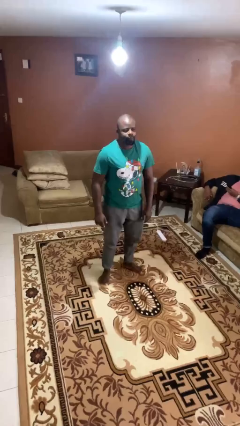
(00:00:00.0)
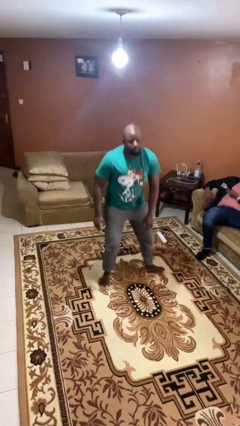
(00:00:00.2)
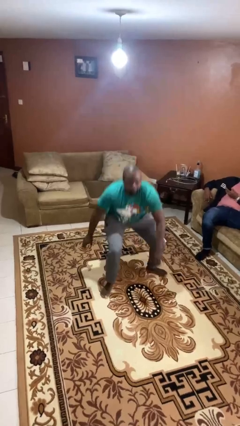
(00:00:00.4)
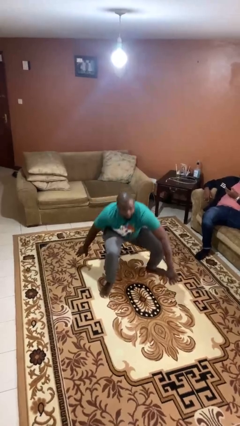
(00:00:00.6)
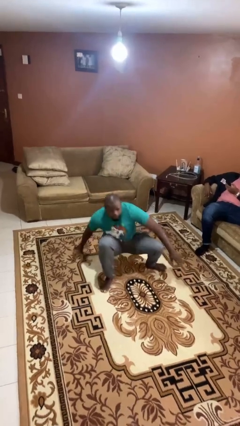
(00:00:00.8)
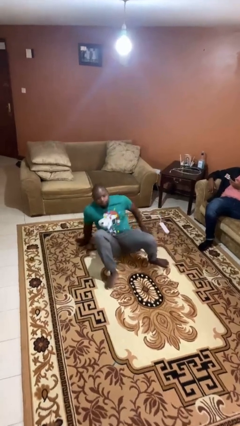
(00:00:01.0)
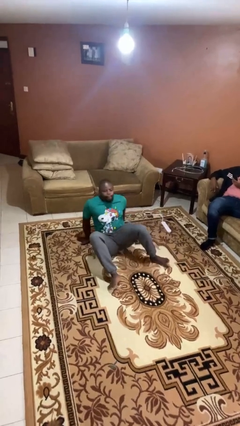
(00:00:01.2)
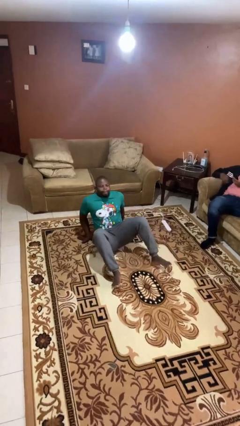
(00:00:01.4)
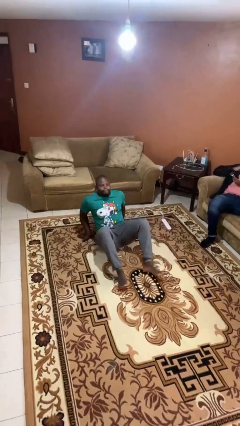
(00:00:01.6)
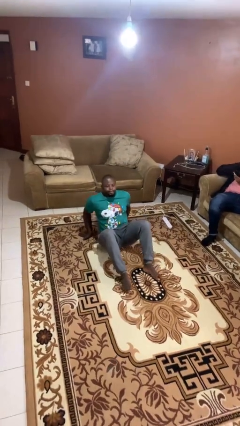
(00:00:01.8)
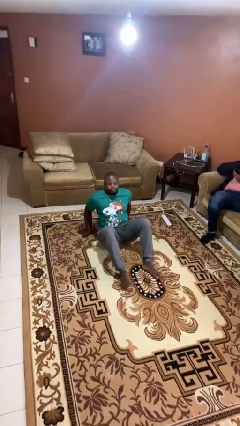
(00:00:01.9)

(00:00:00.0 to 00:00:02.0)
person sits down

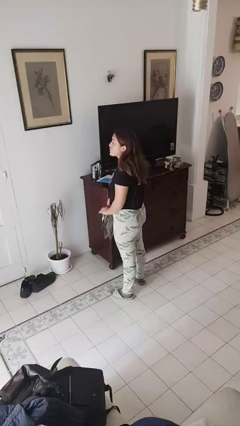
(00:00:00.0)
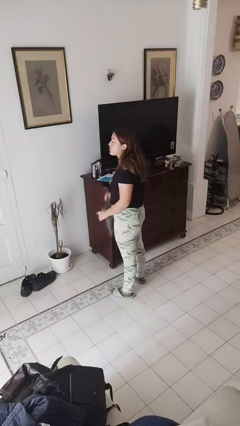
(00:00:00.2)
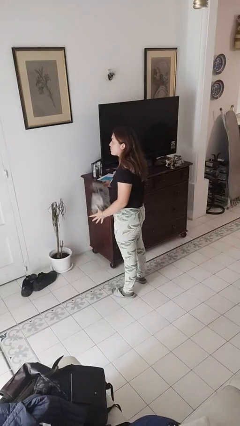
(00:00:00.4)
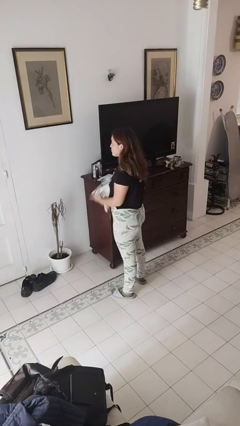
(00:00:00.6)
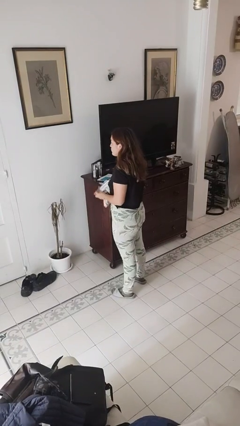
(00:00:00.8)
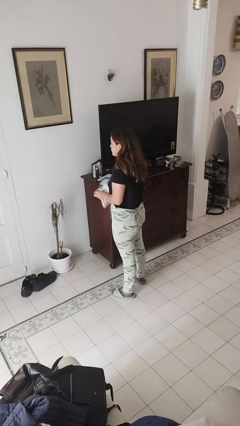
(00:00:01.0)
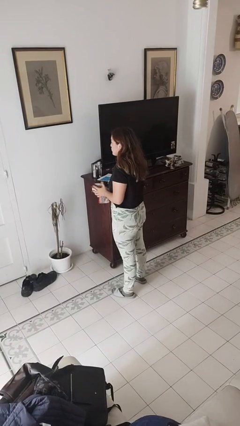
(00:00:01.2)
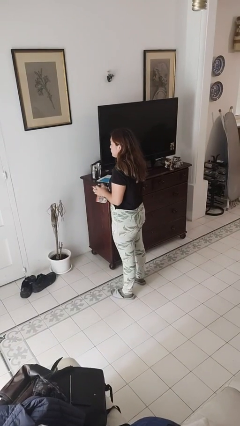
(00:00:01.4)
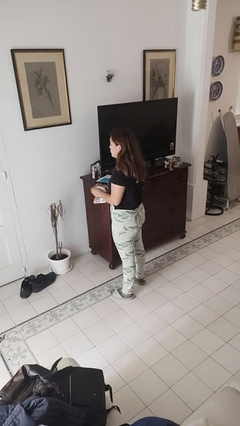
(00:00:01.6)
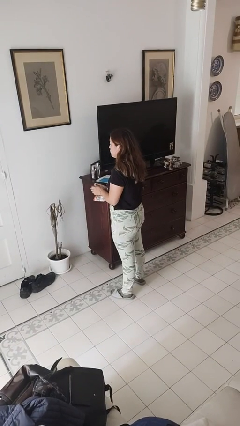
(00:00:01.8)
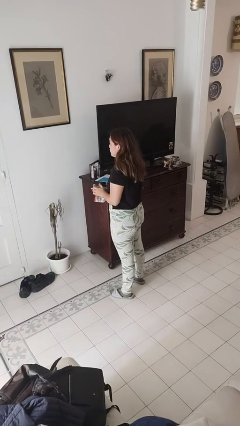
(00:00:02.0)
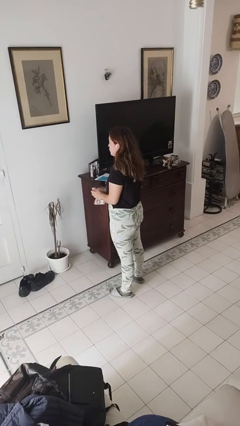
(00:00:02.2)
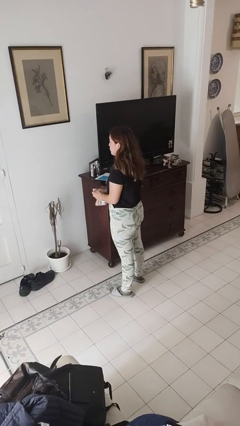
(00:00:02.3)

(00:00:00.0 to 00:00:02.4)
person crumples paper

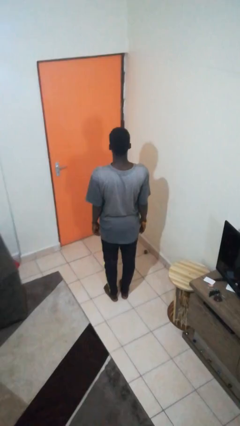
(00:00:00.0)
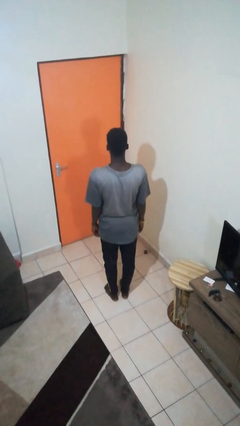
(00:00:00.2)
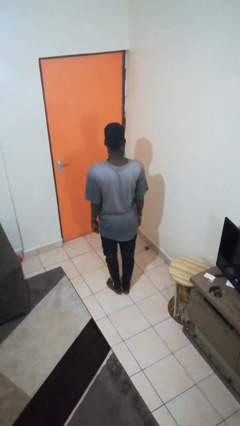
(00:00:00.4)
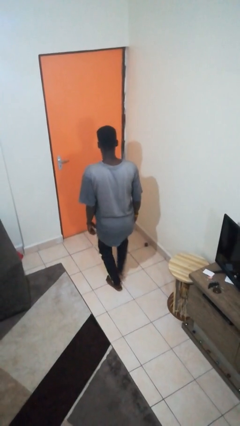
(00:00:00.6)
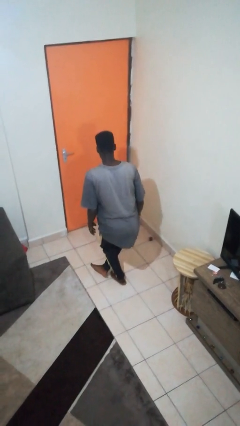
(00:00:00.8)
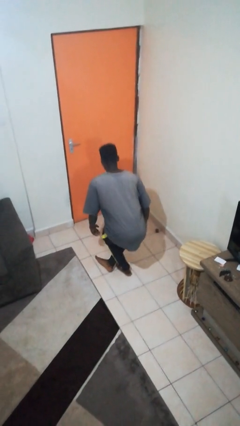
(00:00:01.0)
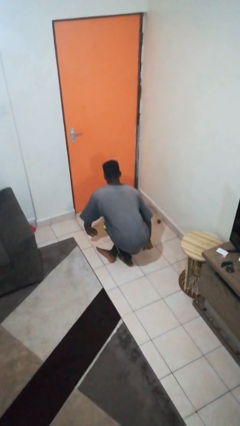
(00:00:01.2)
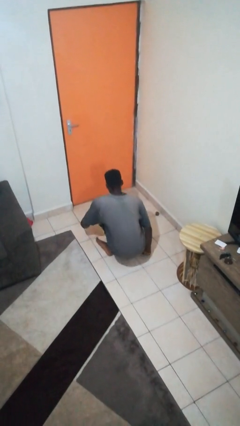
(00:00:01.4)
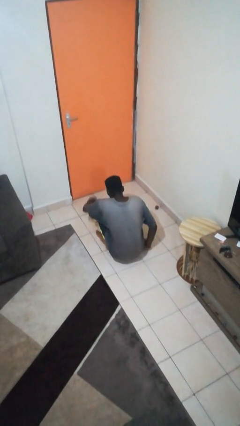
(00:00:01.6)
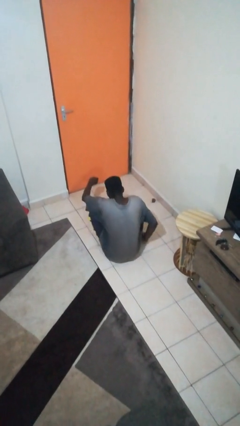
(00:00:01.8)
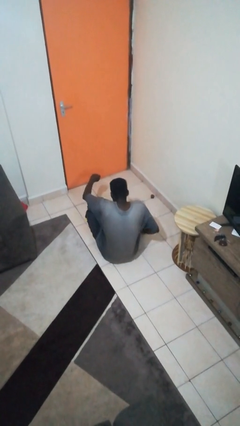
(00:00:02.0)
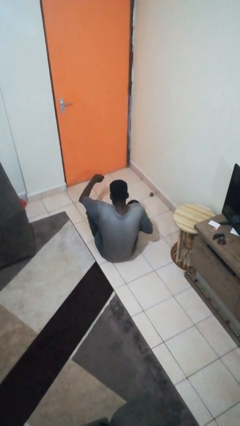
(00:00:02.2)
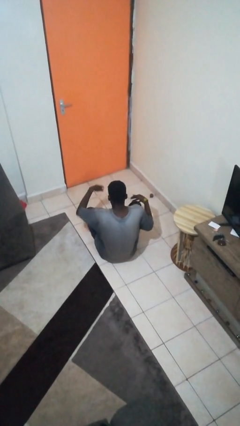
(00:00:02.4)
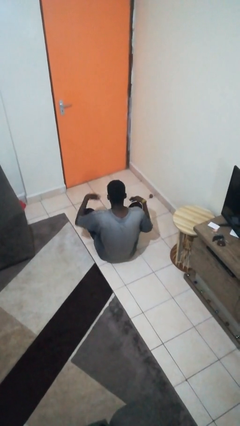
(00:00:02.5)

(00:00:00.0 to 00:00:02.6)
person sits crisscross

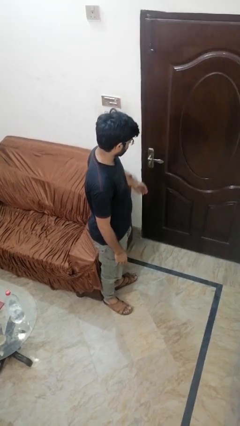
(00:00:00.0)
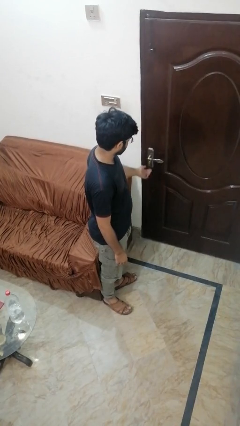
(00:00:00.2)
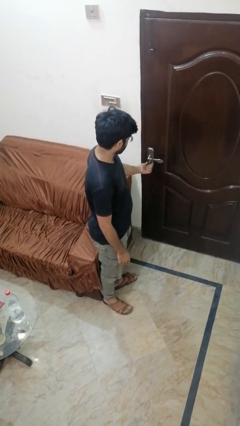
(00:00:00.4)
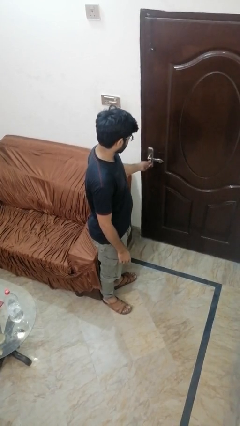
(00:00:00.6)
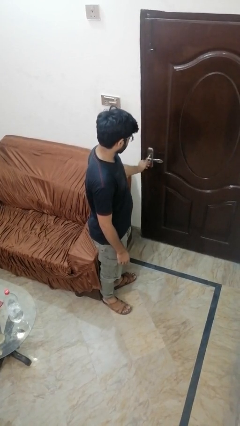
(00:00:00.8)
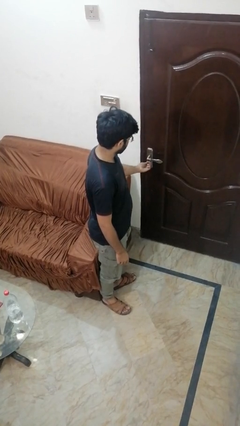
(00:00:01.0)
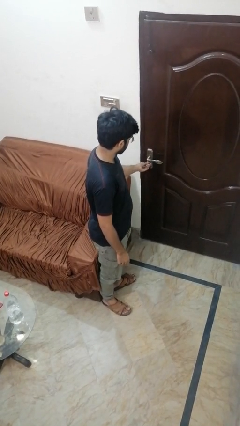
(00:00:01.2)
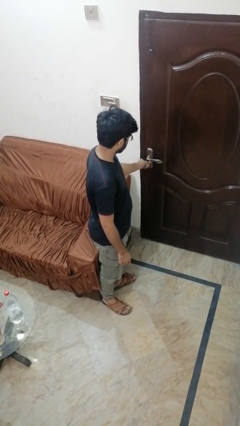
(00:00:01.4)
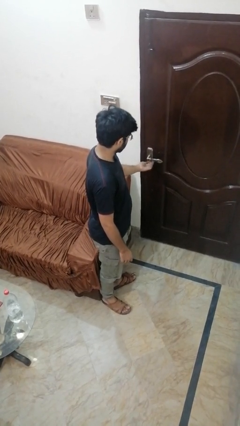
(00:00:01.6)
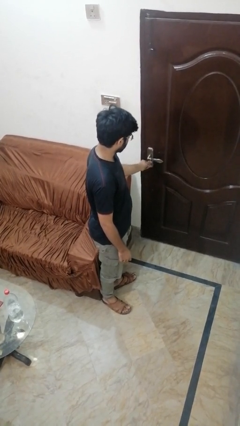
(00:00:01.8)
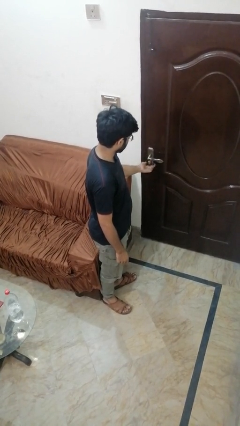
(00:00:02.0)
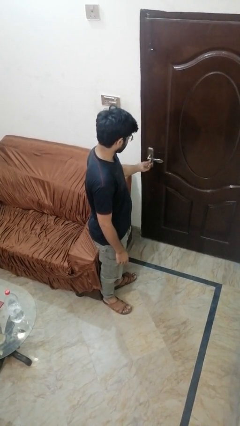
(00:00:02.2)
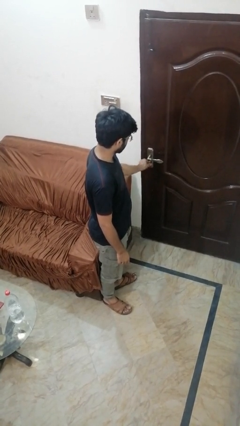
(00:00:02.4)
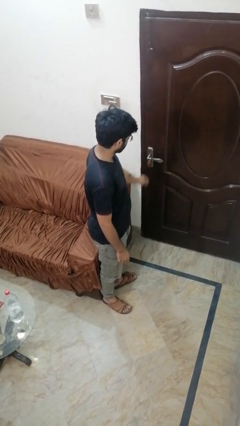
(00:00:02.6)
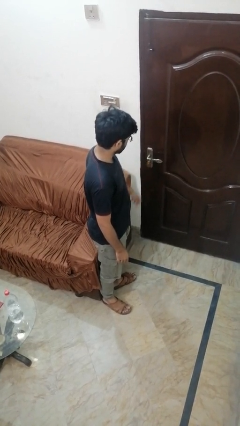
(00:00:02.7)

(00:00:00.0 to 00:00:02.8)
person unlocks door with keys

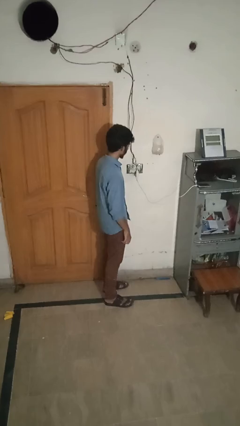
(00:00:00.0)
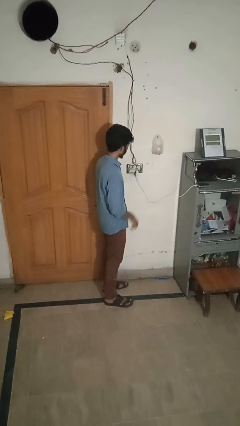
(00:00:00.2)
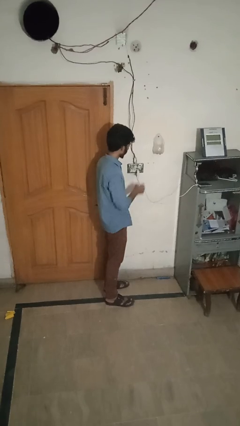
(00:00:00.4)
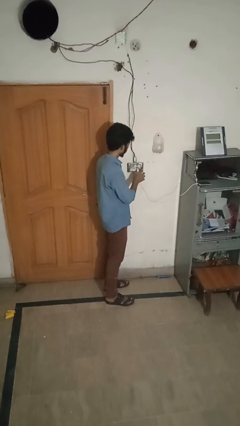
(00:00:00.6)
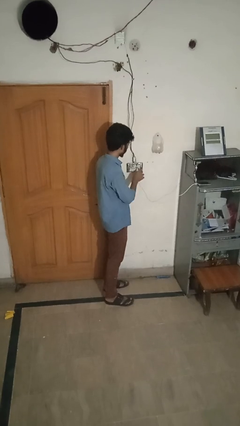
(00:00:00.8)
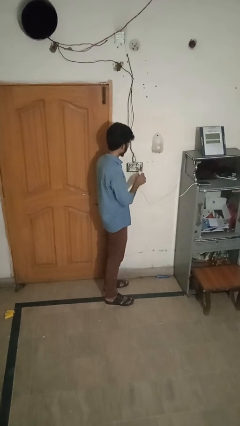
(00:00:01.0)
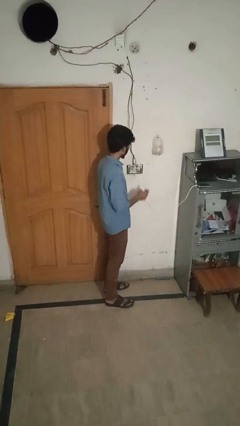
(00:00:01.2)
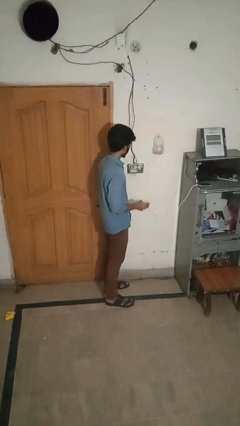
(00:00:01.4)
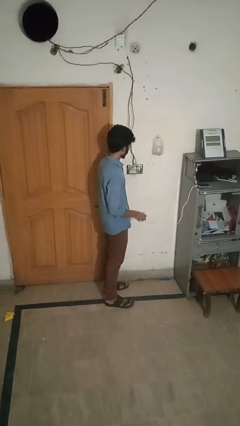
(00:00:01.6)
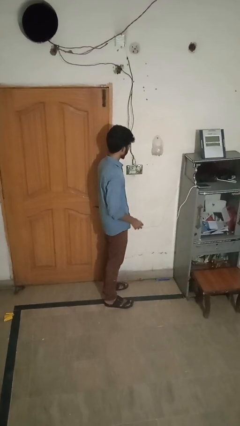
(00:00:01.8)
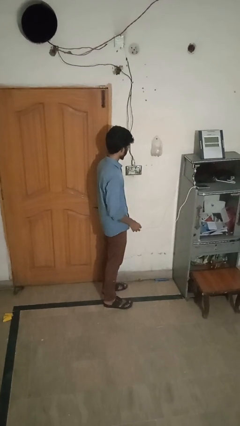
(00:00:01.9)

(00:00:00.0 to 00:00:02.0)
person unplugs from electrical socket

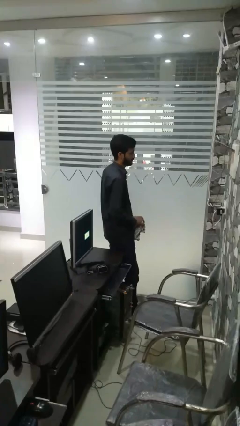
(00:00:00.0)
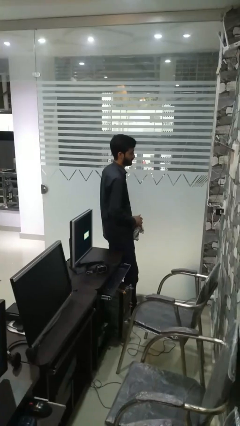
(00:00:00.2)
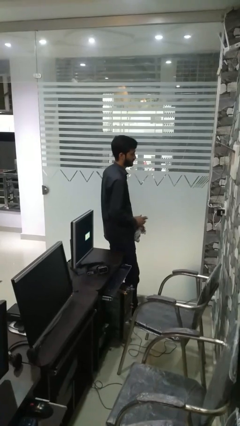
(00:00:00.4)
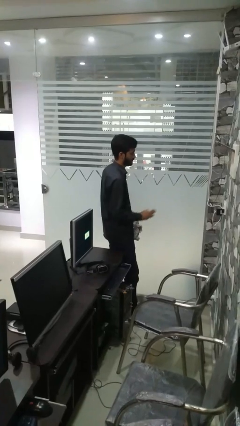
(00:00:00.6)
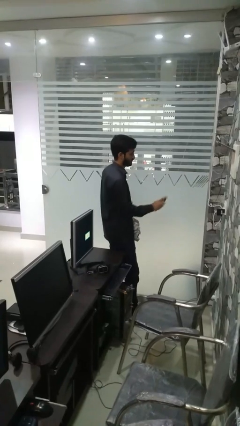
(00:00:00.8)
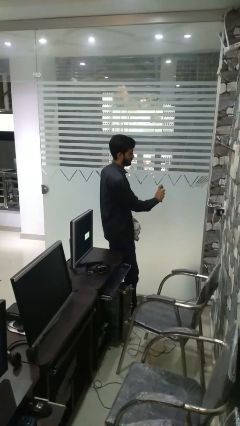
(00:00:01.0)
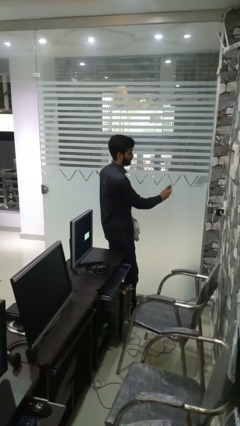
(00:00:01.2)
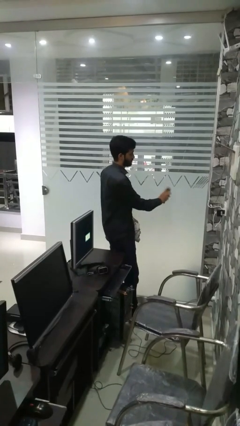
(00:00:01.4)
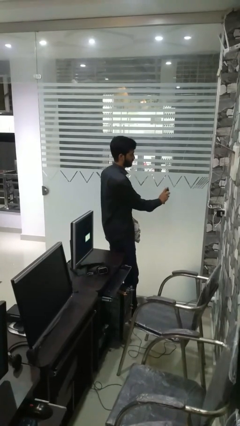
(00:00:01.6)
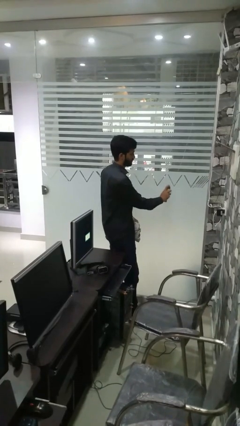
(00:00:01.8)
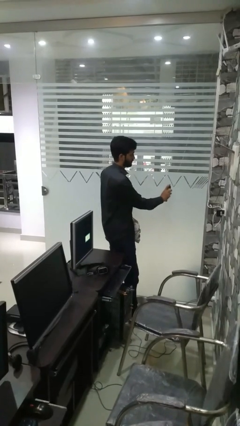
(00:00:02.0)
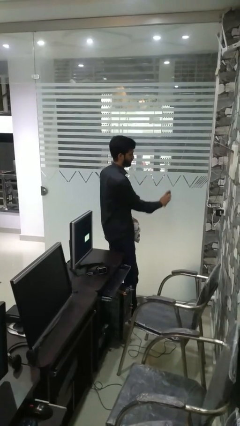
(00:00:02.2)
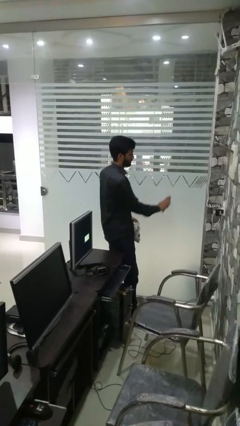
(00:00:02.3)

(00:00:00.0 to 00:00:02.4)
person sprays from bottle

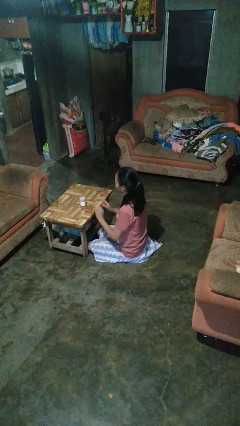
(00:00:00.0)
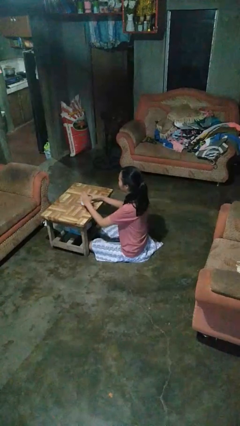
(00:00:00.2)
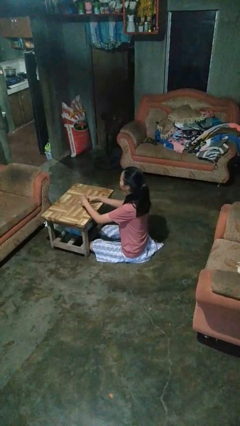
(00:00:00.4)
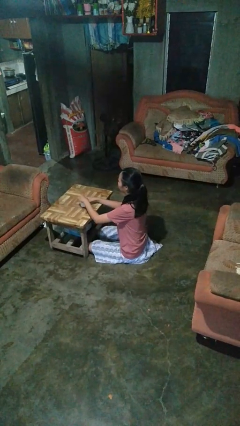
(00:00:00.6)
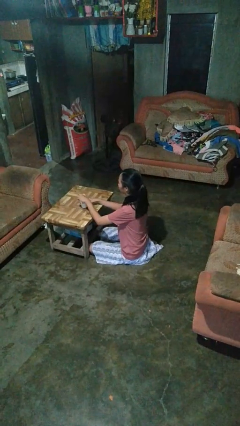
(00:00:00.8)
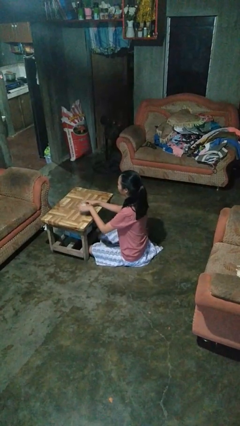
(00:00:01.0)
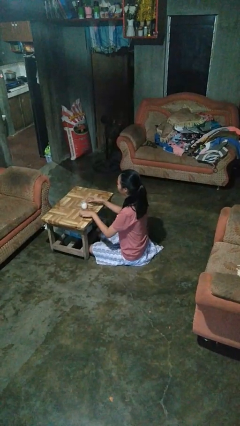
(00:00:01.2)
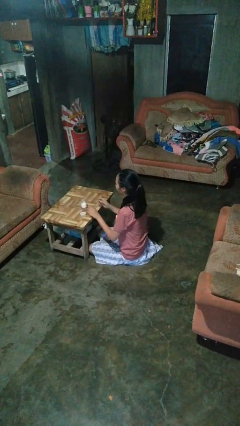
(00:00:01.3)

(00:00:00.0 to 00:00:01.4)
person opens jar

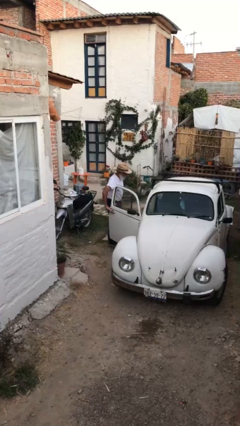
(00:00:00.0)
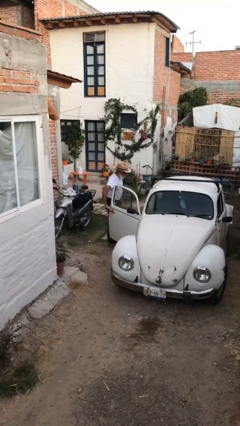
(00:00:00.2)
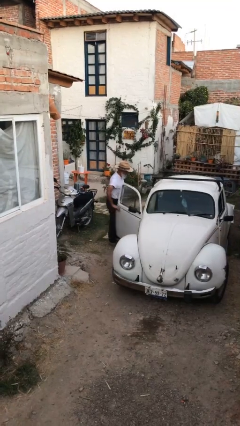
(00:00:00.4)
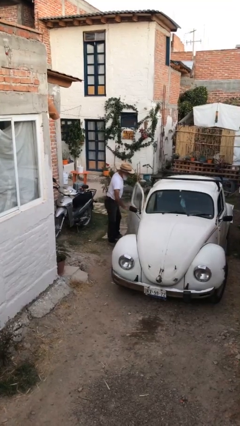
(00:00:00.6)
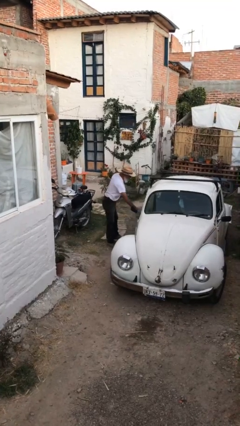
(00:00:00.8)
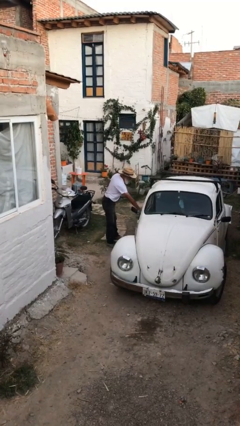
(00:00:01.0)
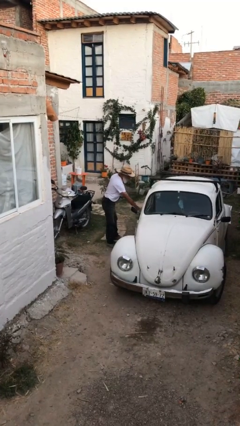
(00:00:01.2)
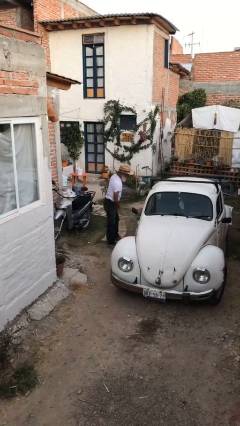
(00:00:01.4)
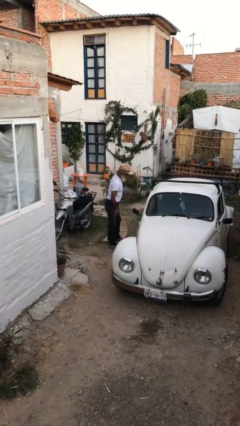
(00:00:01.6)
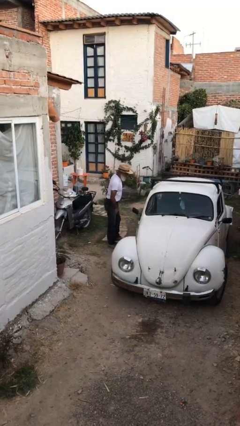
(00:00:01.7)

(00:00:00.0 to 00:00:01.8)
person closes car door
